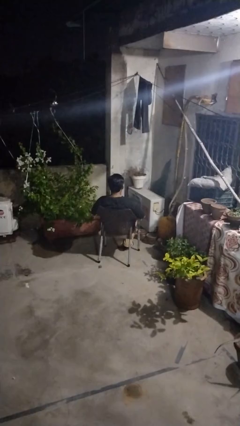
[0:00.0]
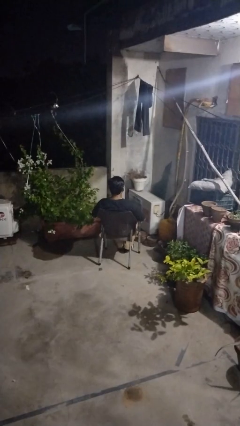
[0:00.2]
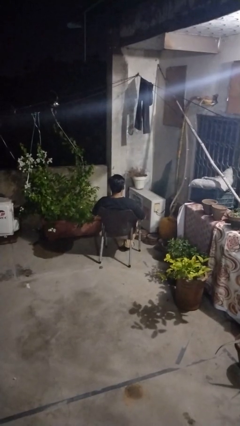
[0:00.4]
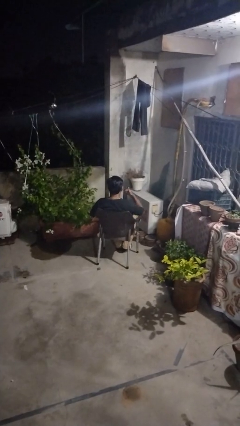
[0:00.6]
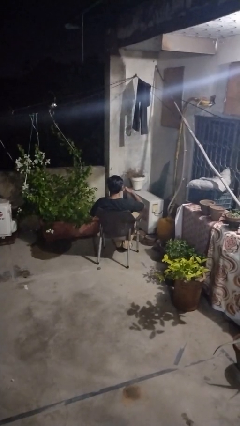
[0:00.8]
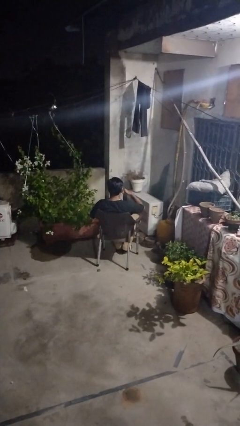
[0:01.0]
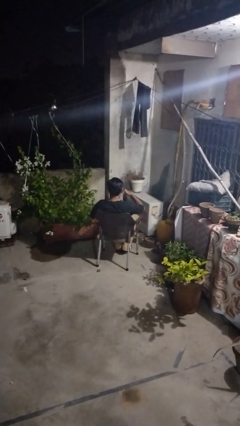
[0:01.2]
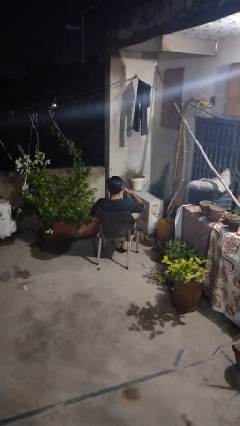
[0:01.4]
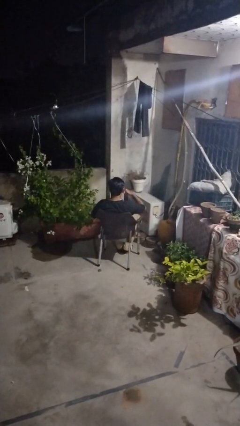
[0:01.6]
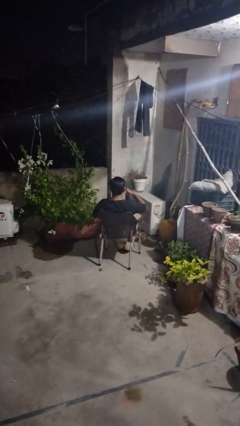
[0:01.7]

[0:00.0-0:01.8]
person gestures call me

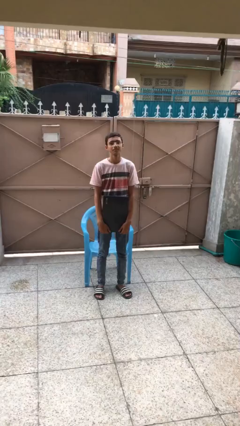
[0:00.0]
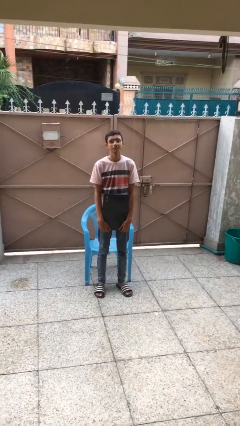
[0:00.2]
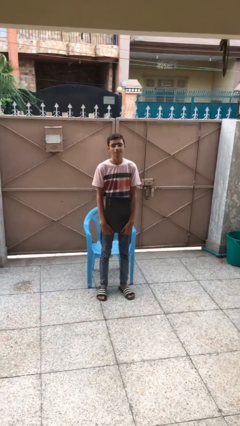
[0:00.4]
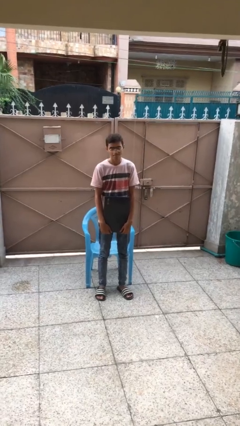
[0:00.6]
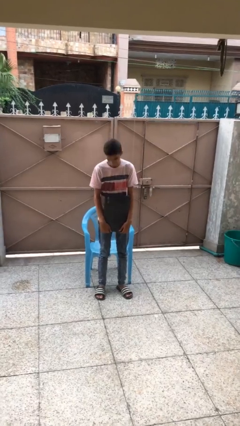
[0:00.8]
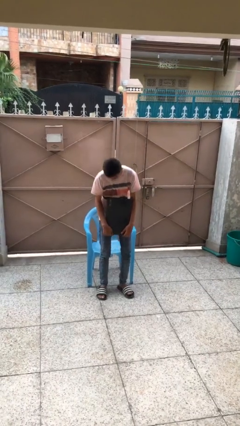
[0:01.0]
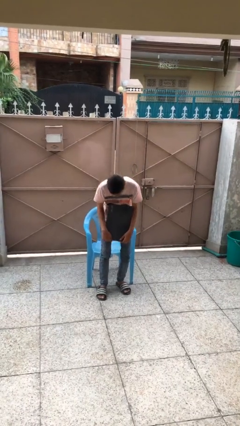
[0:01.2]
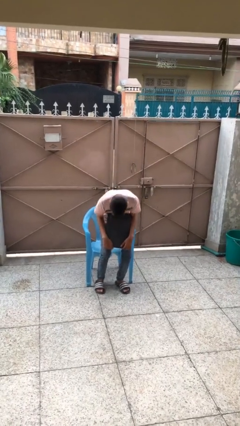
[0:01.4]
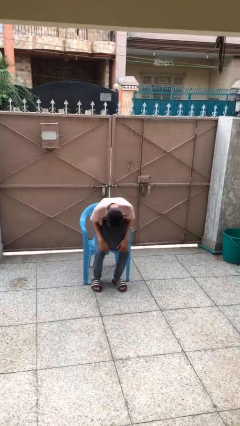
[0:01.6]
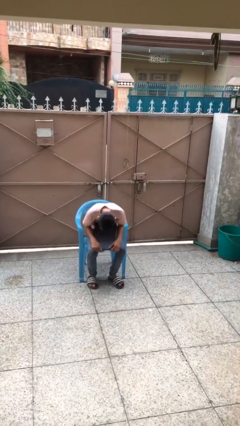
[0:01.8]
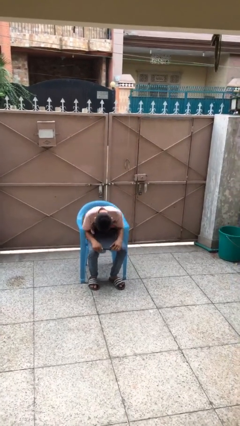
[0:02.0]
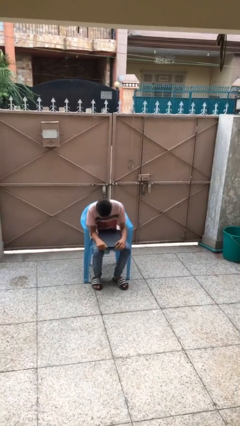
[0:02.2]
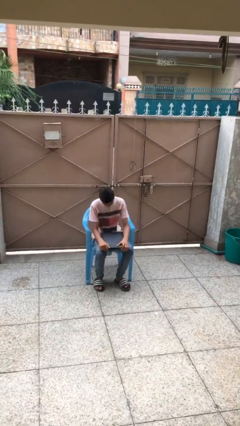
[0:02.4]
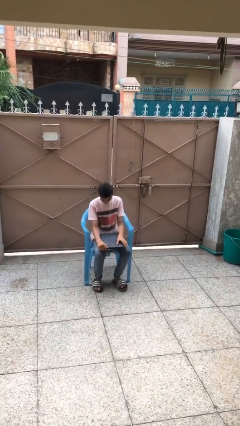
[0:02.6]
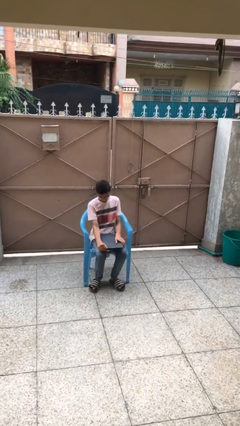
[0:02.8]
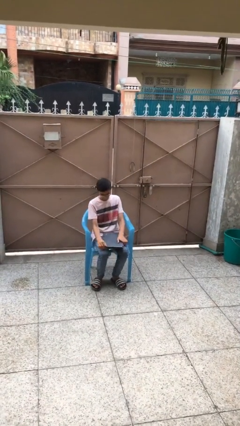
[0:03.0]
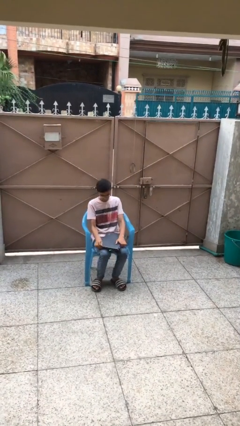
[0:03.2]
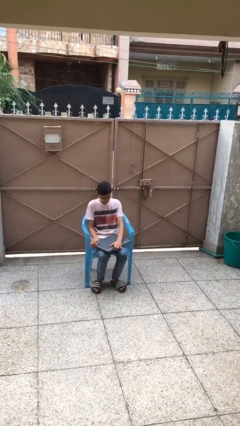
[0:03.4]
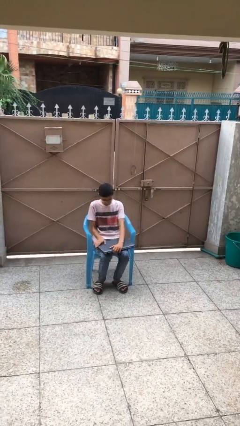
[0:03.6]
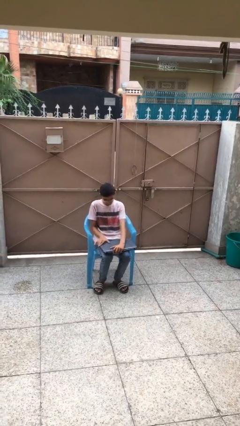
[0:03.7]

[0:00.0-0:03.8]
person sits down

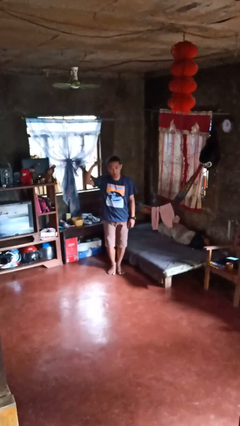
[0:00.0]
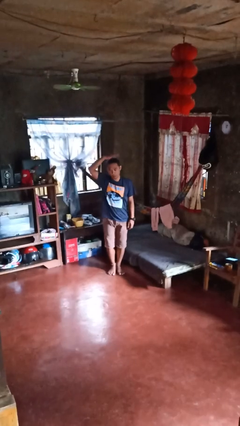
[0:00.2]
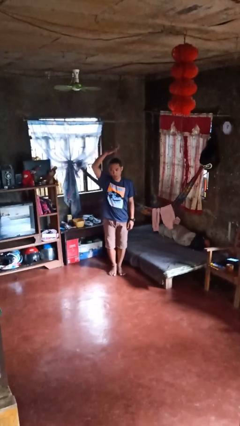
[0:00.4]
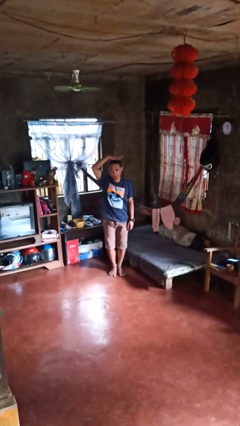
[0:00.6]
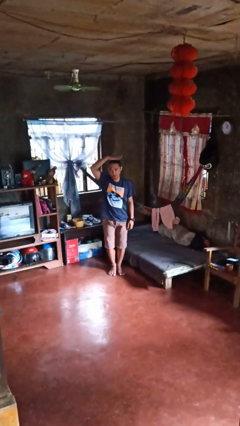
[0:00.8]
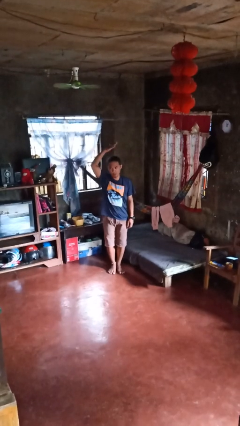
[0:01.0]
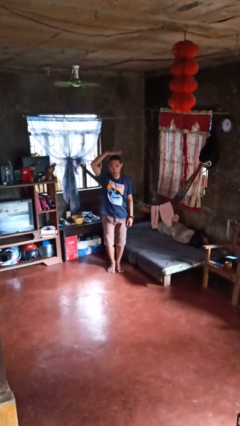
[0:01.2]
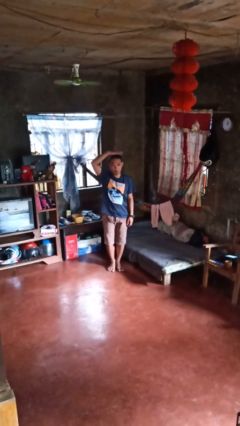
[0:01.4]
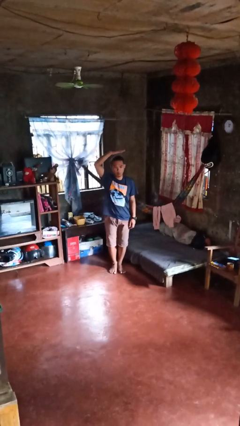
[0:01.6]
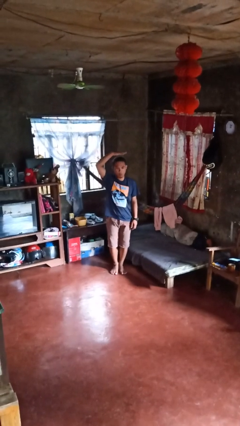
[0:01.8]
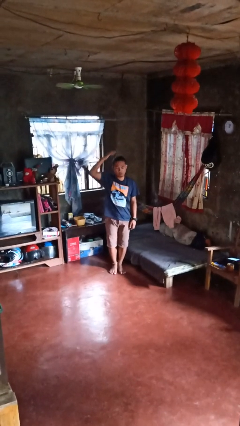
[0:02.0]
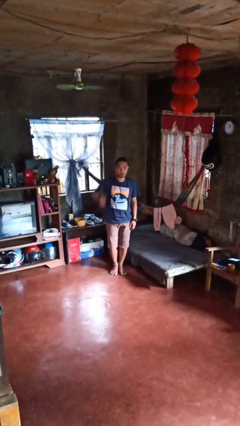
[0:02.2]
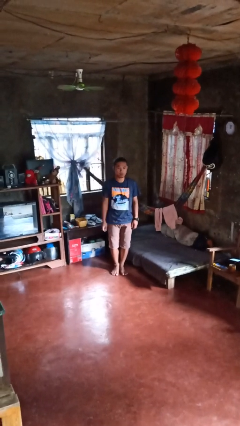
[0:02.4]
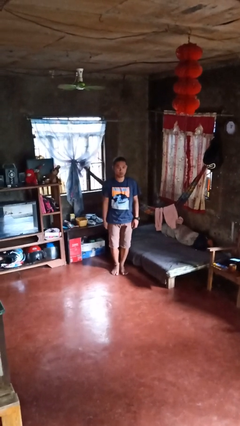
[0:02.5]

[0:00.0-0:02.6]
person pats head

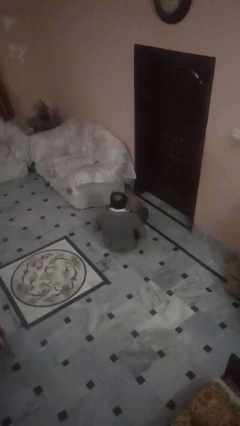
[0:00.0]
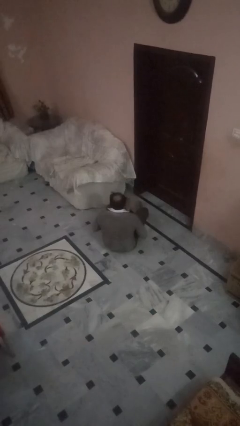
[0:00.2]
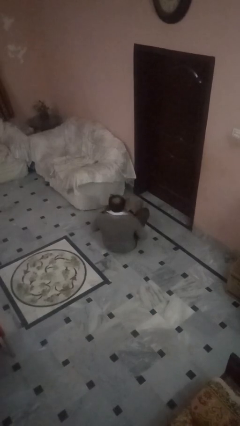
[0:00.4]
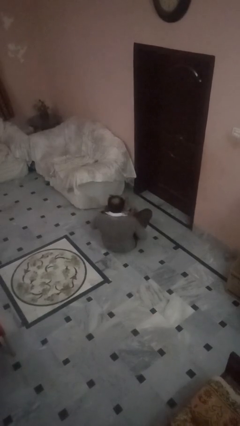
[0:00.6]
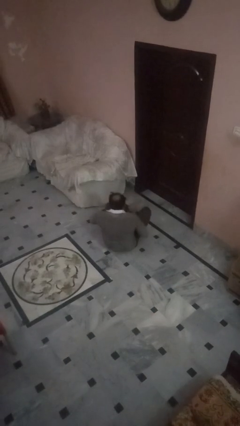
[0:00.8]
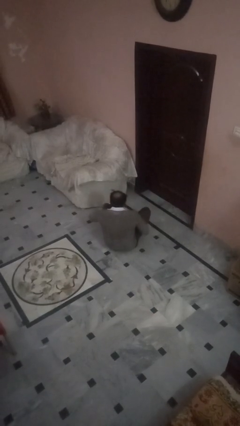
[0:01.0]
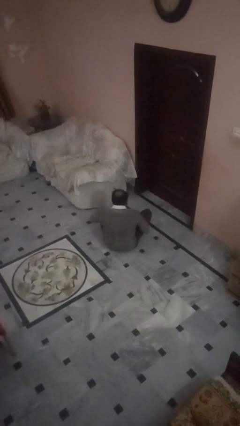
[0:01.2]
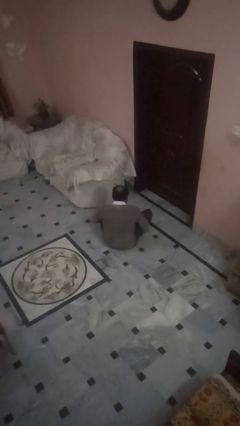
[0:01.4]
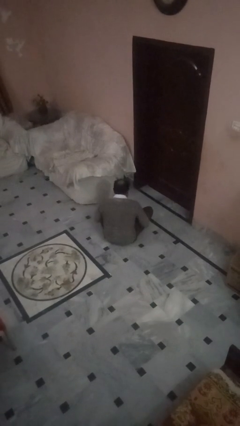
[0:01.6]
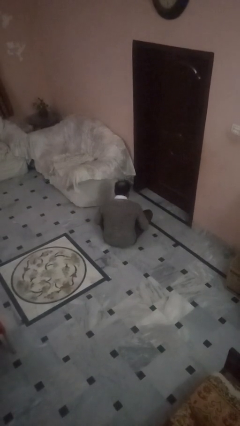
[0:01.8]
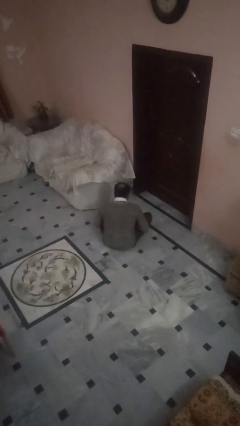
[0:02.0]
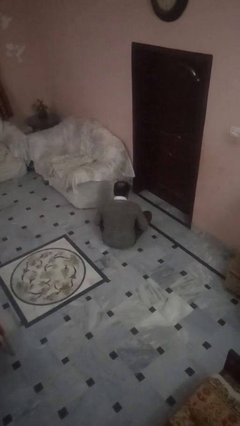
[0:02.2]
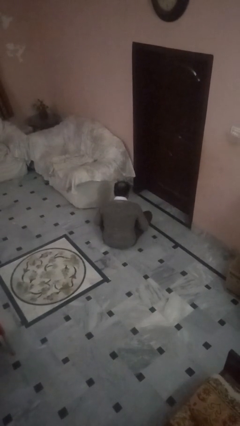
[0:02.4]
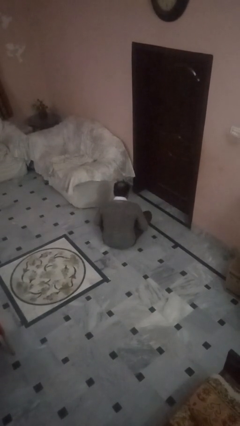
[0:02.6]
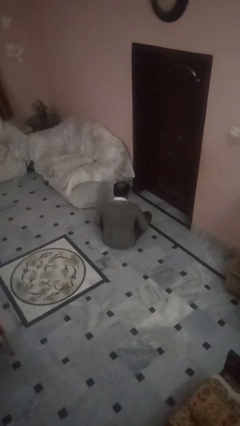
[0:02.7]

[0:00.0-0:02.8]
person crosses legs

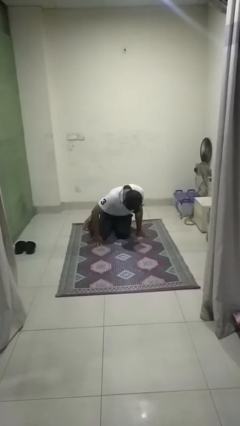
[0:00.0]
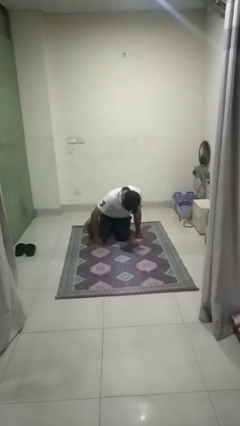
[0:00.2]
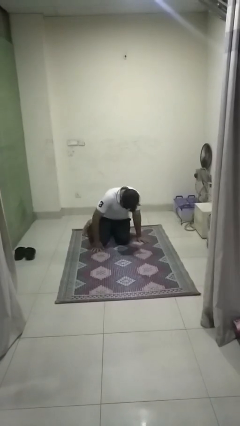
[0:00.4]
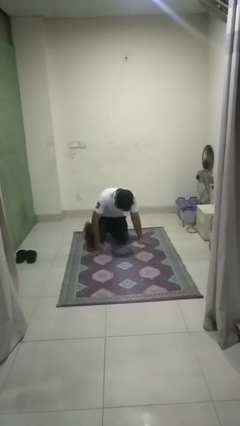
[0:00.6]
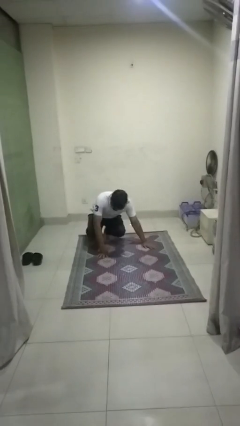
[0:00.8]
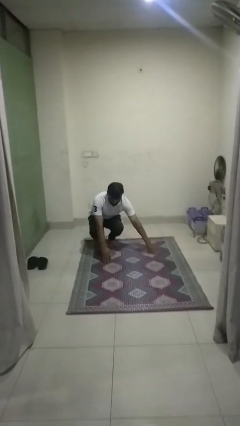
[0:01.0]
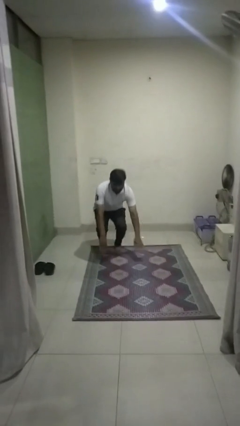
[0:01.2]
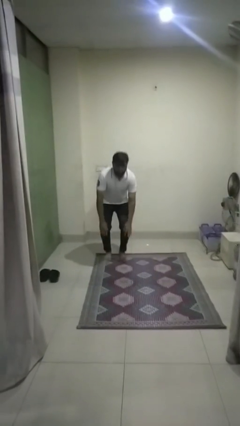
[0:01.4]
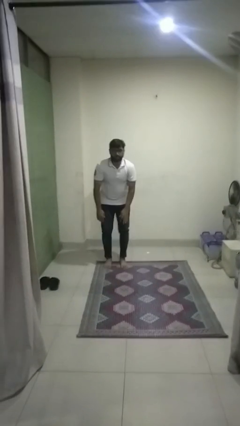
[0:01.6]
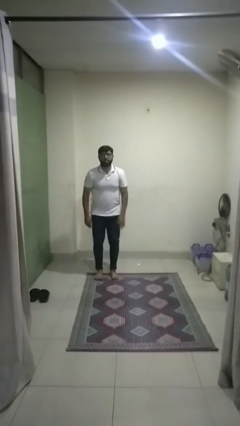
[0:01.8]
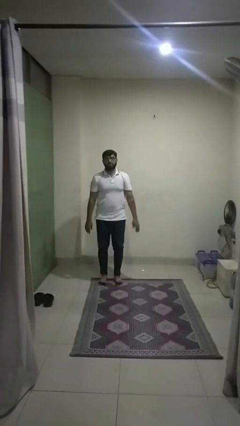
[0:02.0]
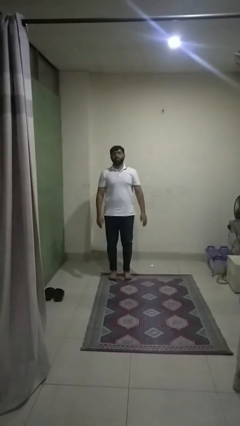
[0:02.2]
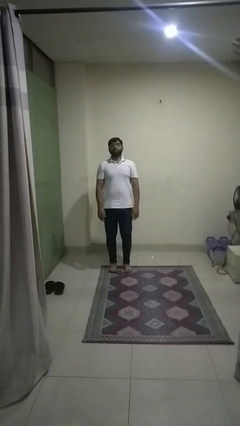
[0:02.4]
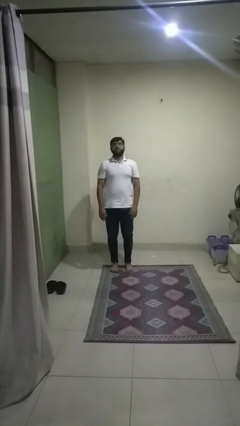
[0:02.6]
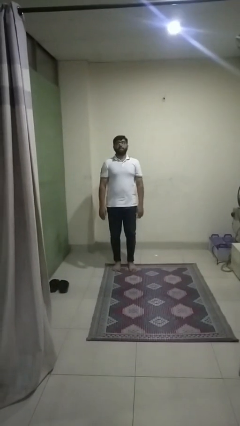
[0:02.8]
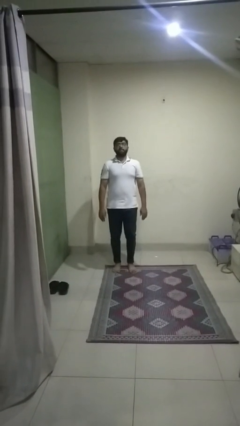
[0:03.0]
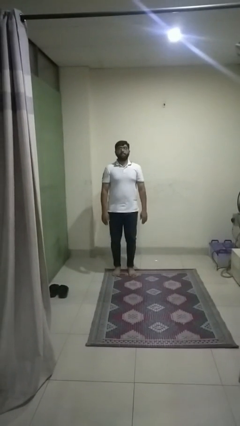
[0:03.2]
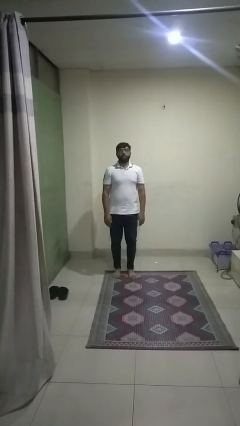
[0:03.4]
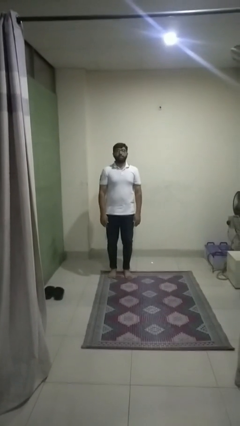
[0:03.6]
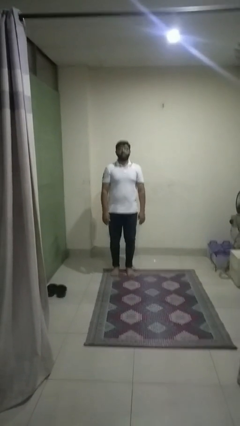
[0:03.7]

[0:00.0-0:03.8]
person stands up from floor

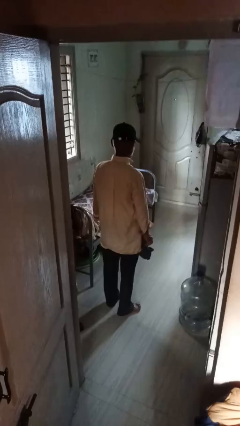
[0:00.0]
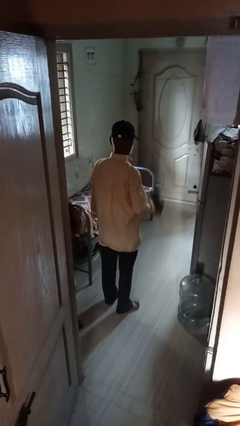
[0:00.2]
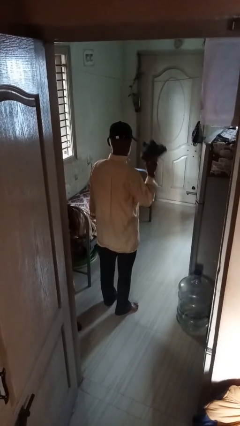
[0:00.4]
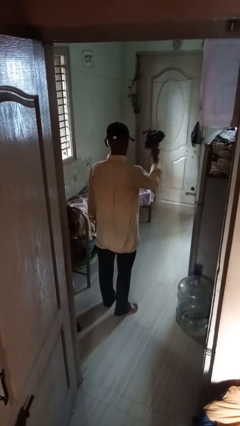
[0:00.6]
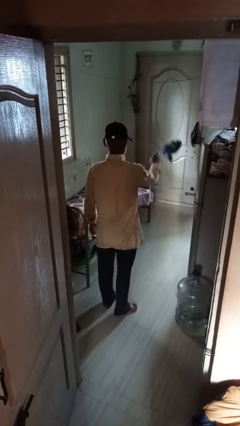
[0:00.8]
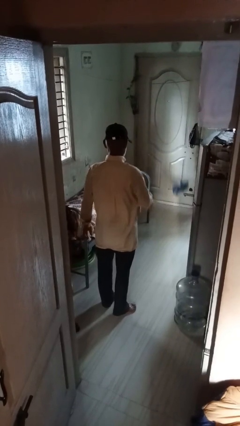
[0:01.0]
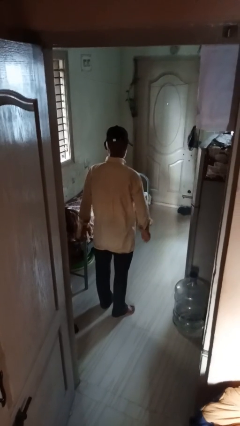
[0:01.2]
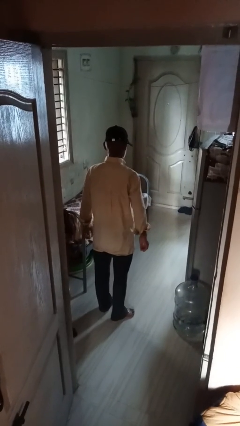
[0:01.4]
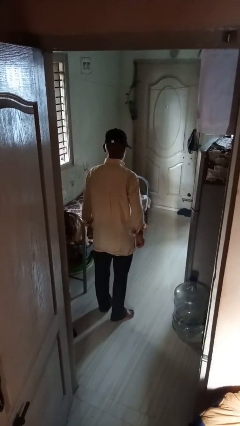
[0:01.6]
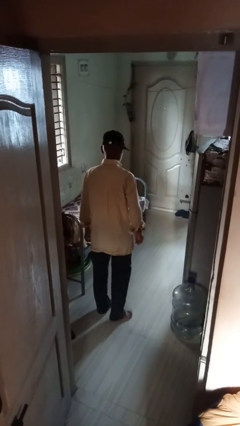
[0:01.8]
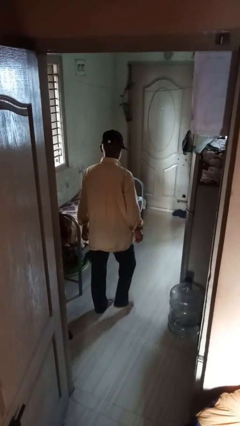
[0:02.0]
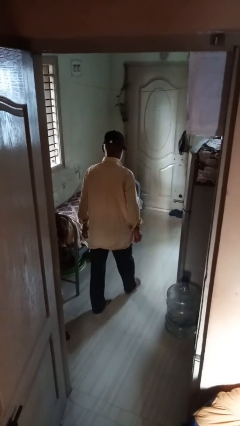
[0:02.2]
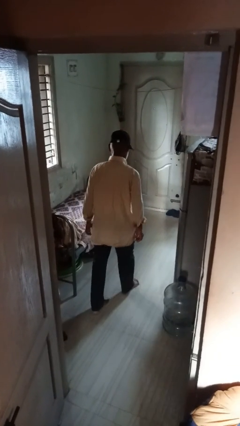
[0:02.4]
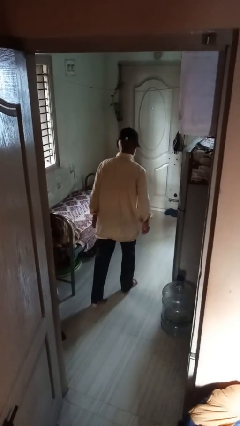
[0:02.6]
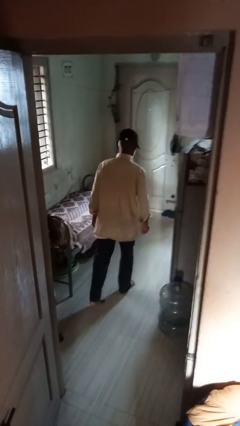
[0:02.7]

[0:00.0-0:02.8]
person throws object to ground
